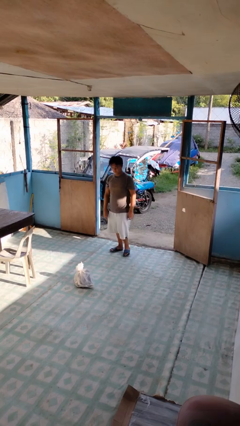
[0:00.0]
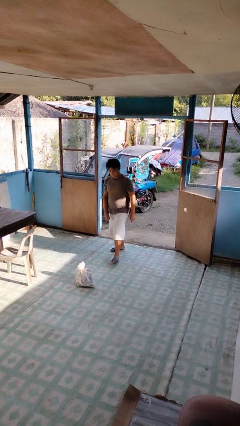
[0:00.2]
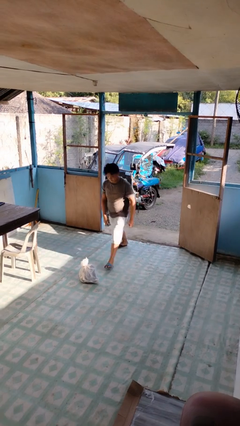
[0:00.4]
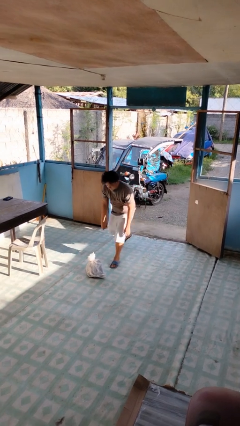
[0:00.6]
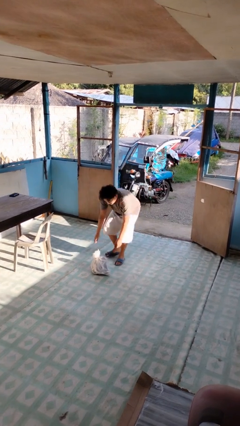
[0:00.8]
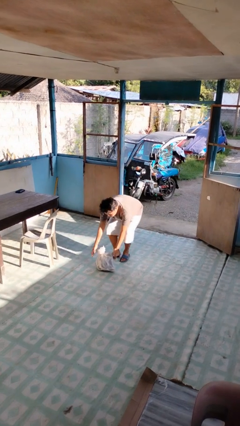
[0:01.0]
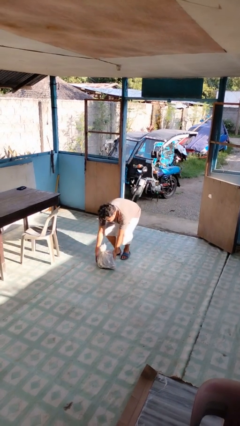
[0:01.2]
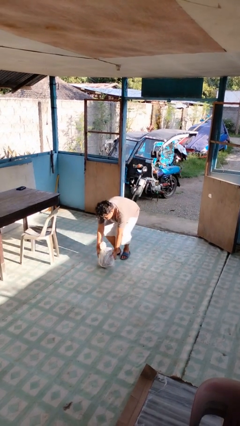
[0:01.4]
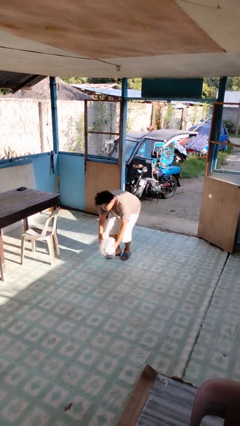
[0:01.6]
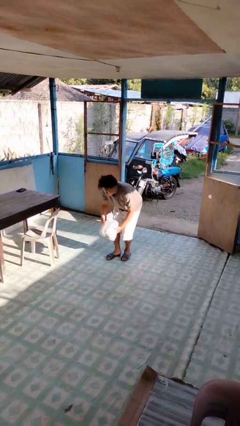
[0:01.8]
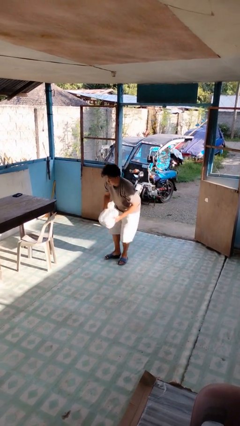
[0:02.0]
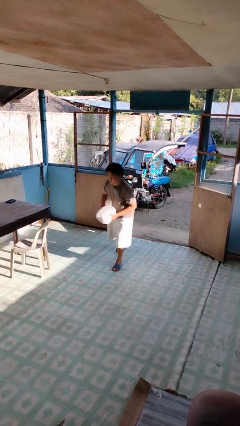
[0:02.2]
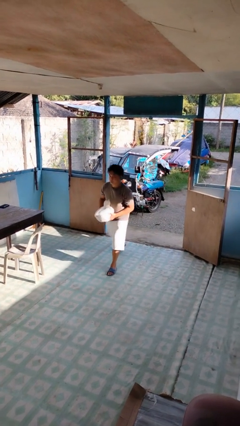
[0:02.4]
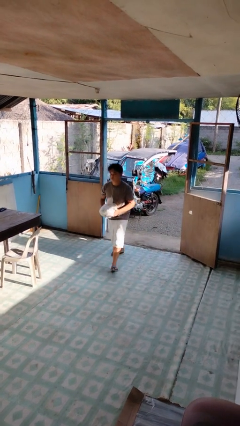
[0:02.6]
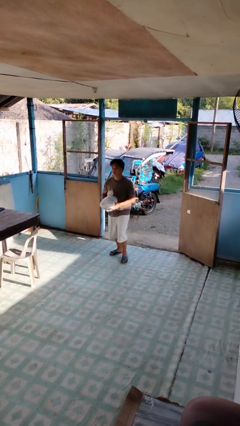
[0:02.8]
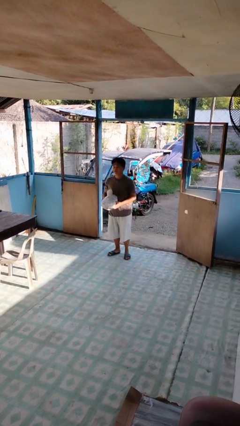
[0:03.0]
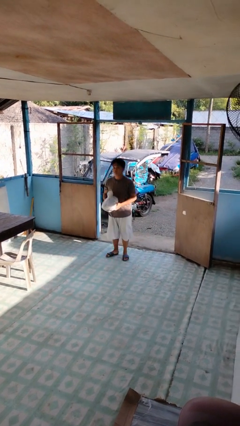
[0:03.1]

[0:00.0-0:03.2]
person picks up object from floor

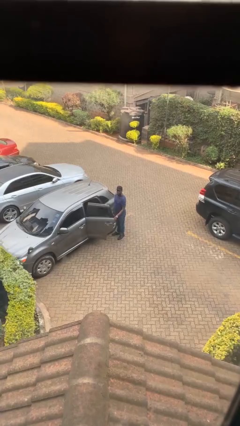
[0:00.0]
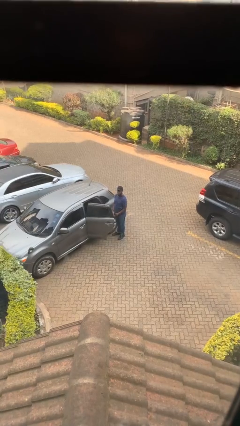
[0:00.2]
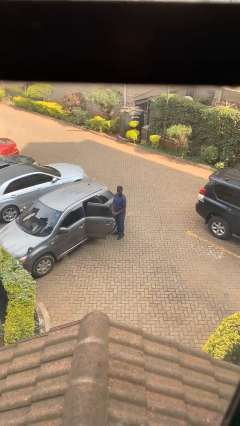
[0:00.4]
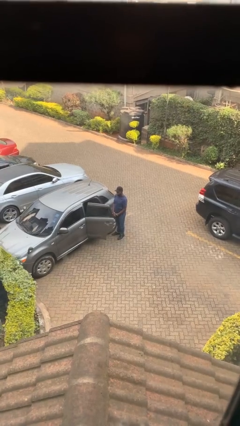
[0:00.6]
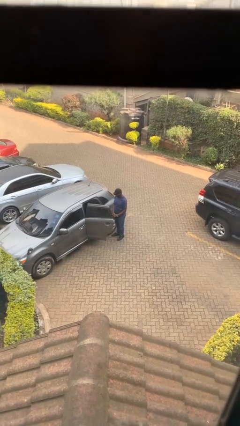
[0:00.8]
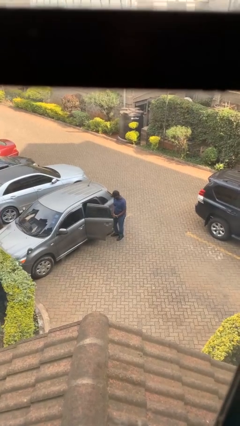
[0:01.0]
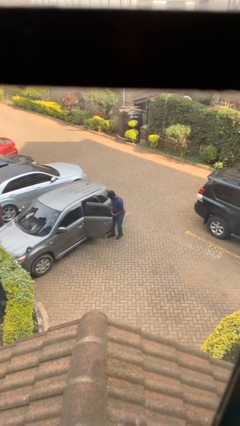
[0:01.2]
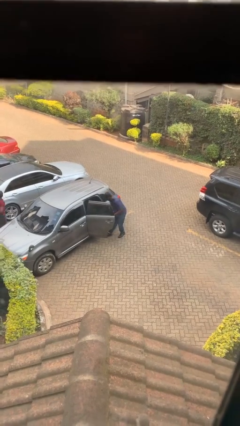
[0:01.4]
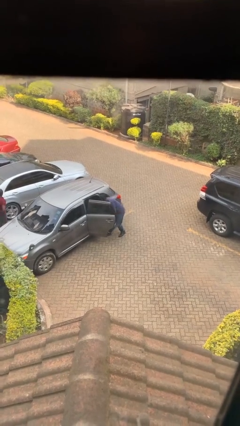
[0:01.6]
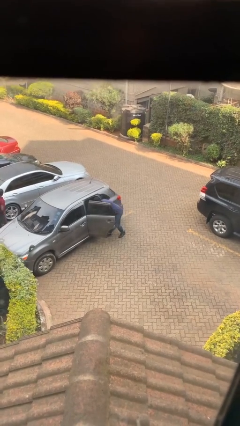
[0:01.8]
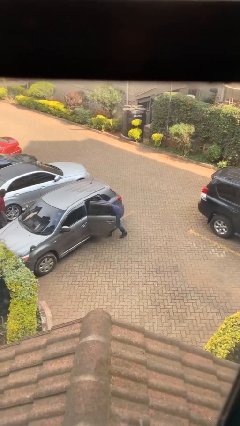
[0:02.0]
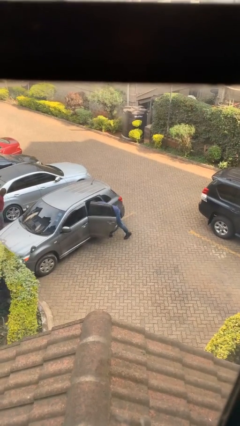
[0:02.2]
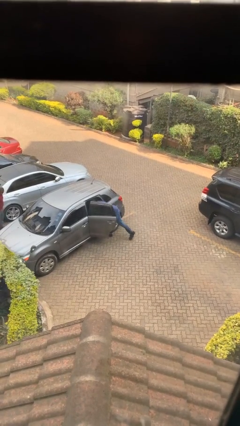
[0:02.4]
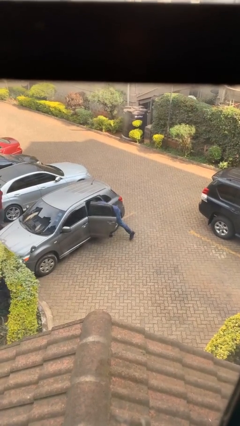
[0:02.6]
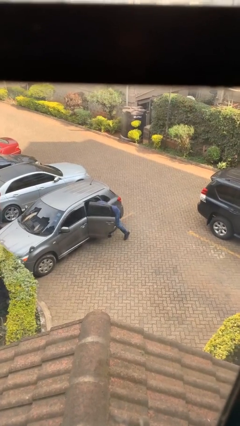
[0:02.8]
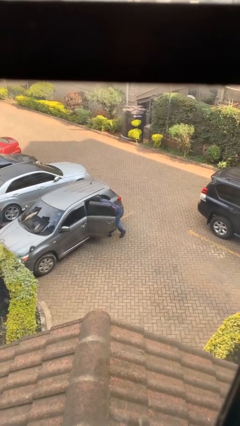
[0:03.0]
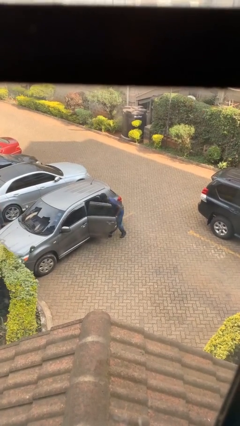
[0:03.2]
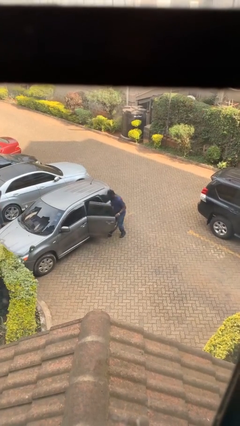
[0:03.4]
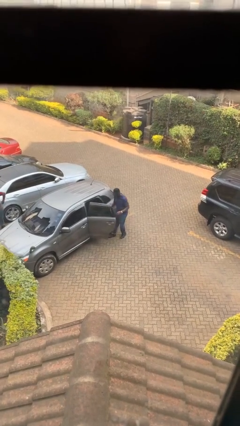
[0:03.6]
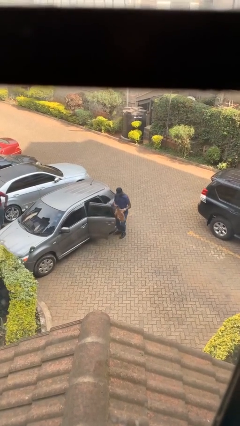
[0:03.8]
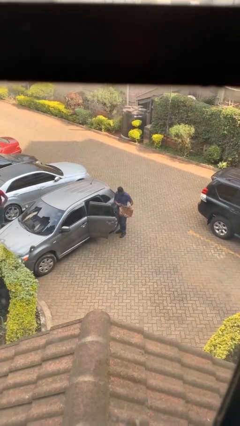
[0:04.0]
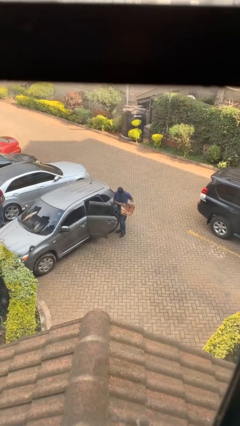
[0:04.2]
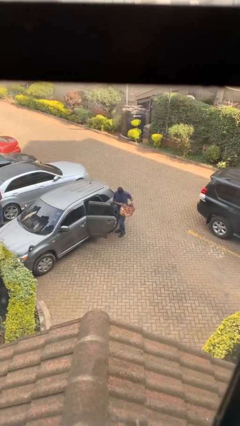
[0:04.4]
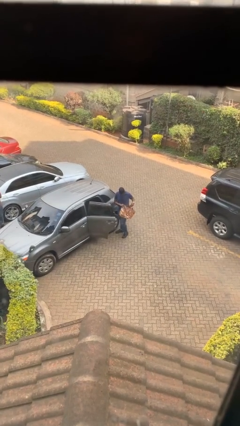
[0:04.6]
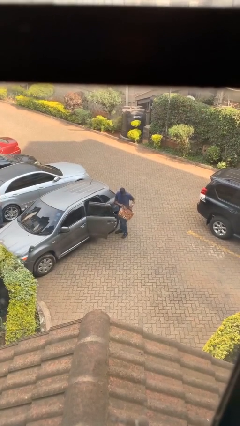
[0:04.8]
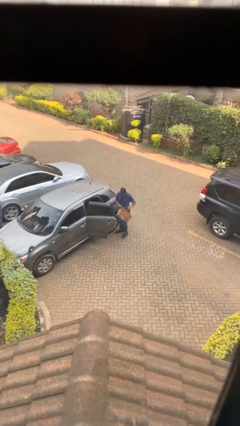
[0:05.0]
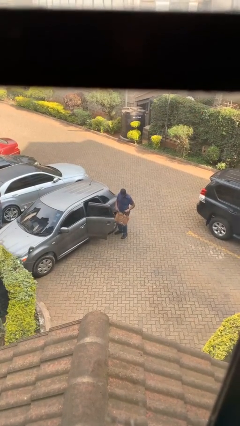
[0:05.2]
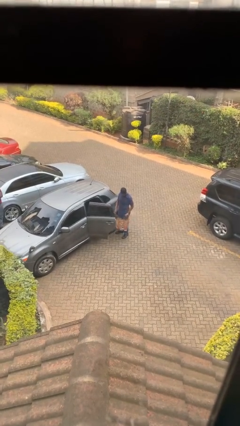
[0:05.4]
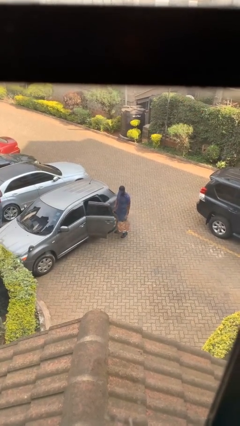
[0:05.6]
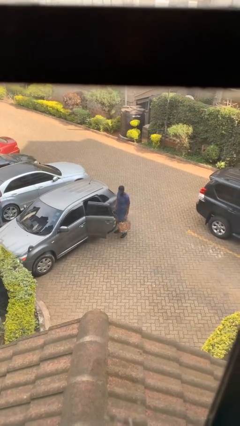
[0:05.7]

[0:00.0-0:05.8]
person unloads car

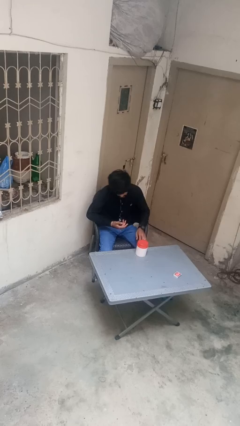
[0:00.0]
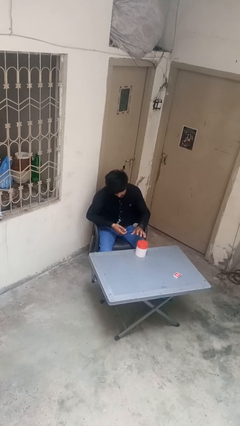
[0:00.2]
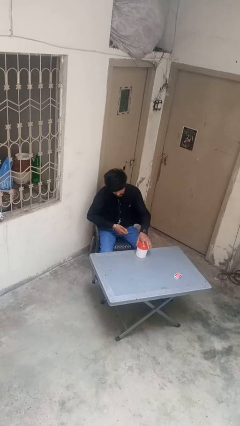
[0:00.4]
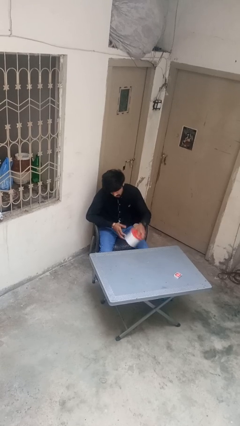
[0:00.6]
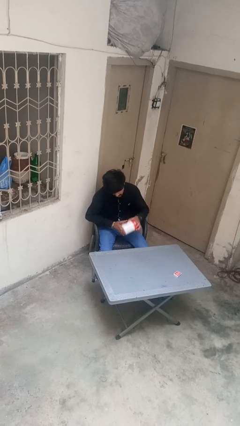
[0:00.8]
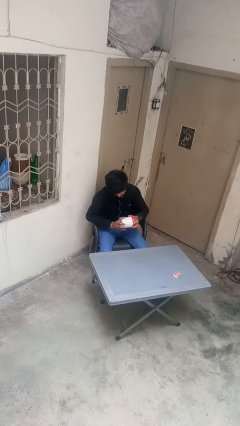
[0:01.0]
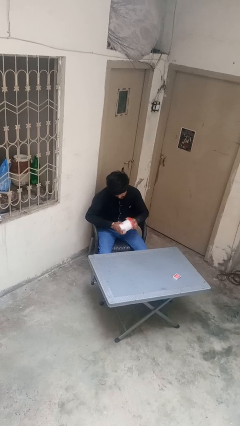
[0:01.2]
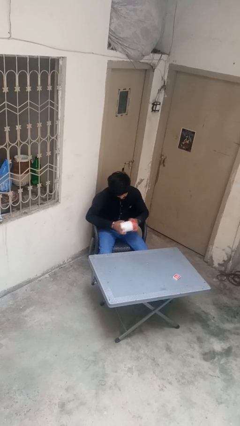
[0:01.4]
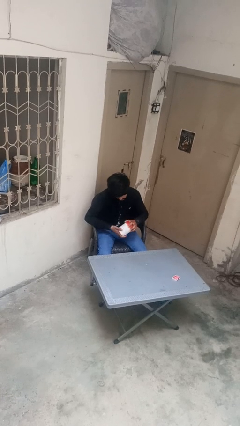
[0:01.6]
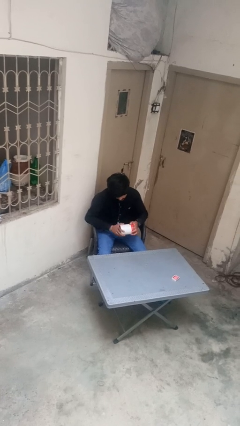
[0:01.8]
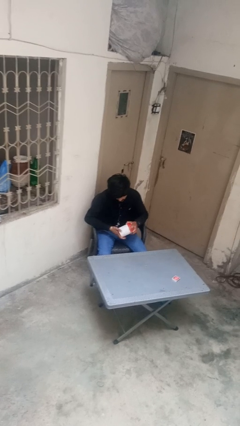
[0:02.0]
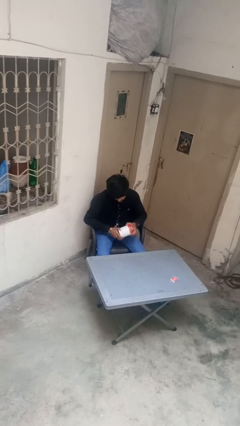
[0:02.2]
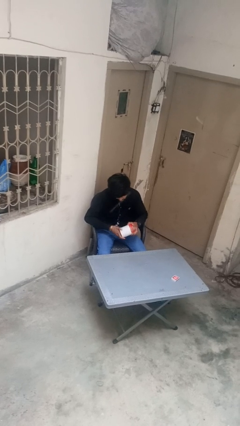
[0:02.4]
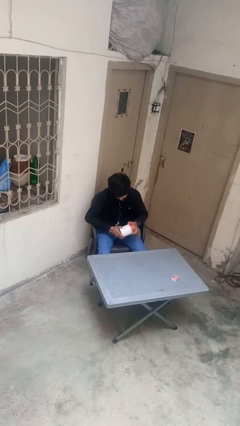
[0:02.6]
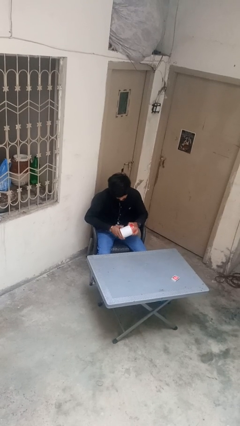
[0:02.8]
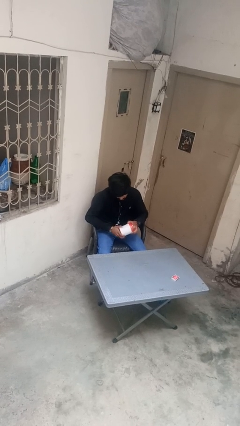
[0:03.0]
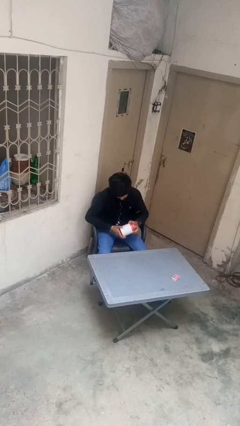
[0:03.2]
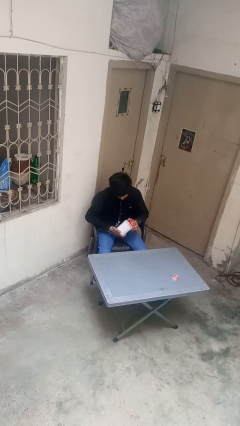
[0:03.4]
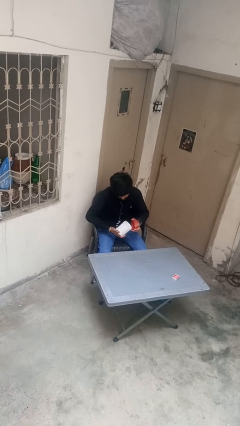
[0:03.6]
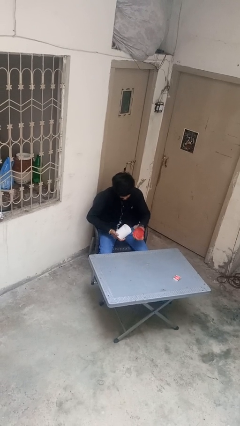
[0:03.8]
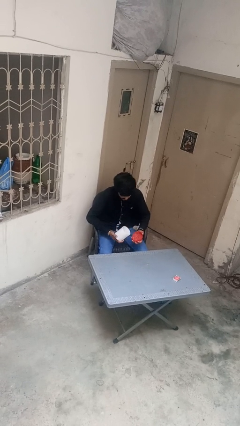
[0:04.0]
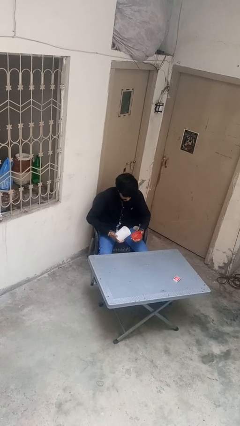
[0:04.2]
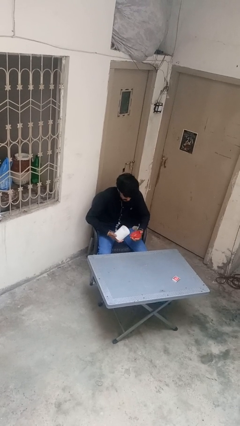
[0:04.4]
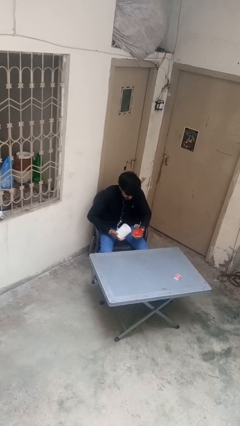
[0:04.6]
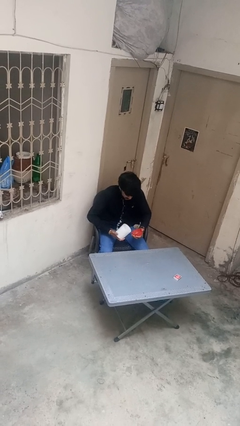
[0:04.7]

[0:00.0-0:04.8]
person opens jar

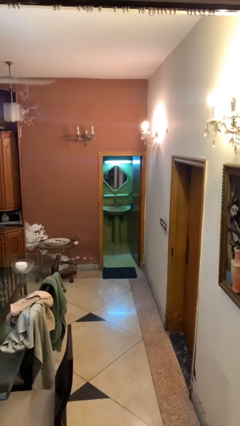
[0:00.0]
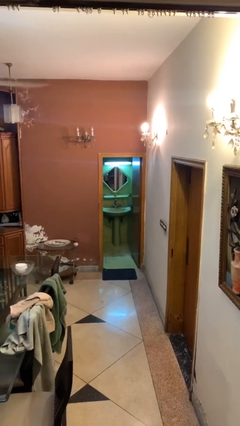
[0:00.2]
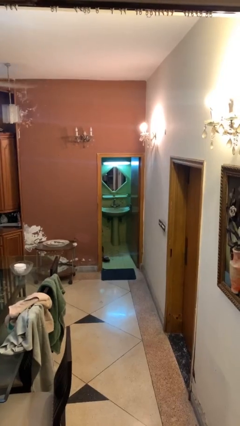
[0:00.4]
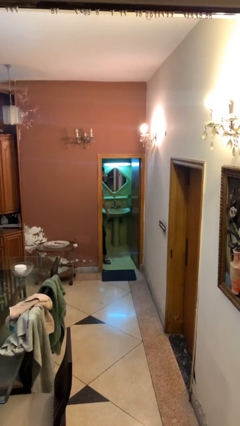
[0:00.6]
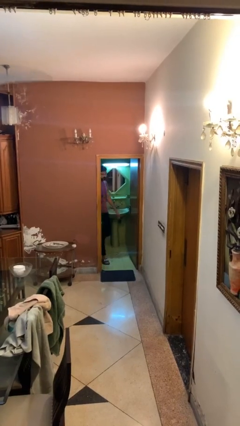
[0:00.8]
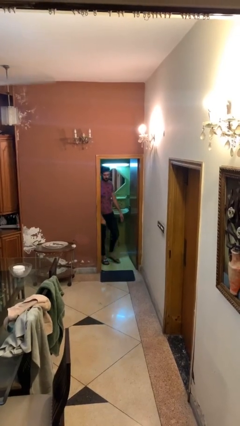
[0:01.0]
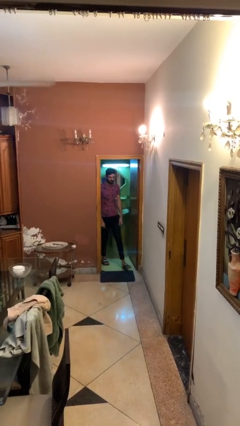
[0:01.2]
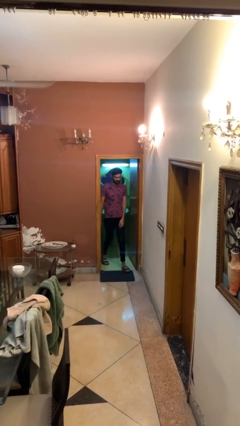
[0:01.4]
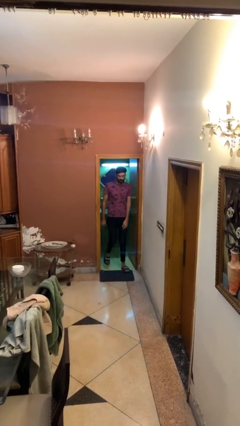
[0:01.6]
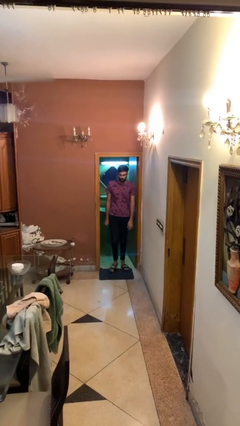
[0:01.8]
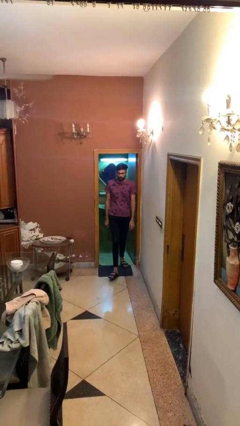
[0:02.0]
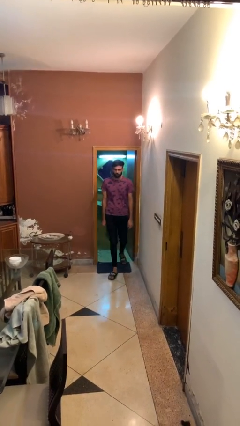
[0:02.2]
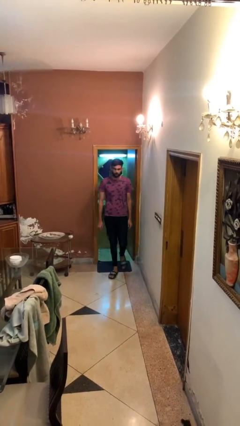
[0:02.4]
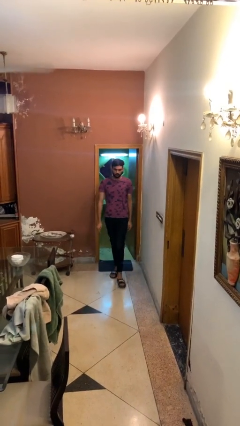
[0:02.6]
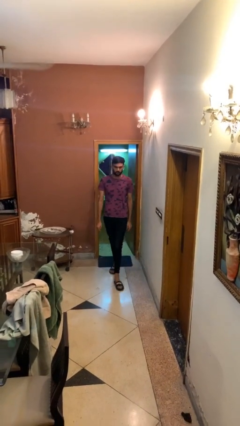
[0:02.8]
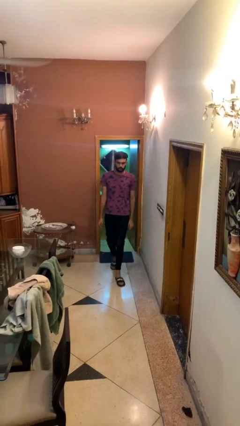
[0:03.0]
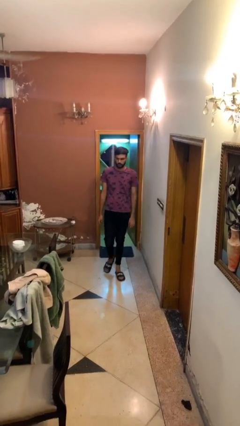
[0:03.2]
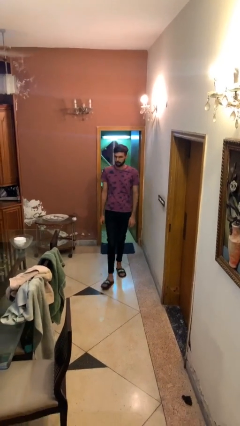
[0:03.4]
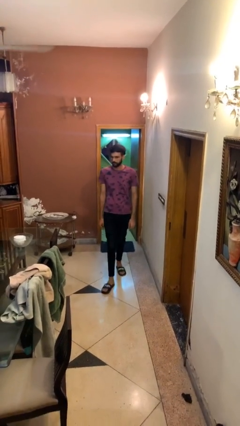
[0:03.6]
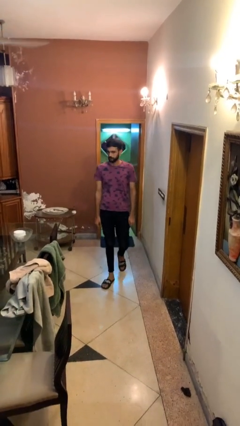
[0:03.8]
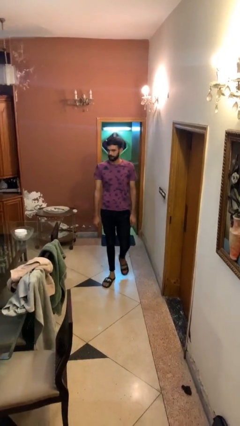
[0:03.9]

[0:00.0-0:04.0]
person enters scene through structure

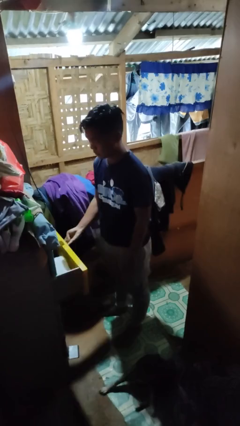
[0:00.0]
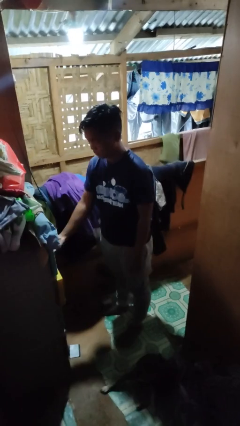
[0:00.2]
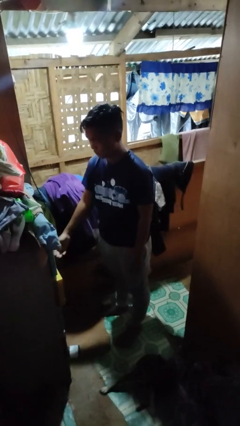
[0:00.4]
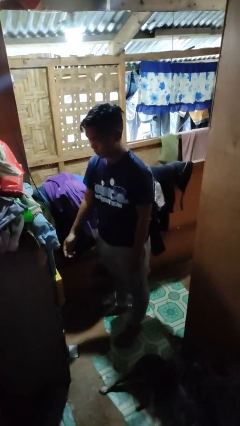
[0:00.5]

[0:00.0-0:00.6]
person closes dresser drawer
